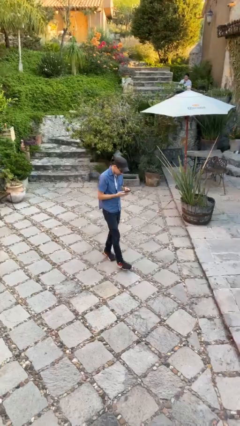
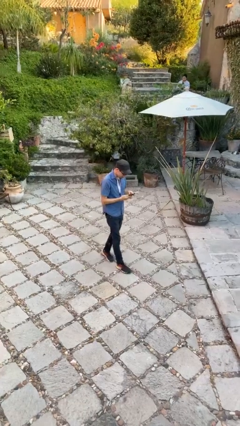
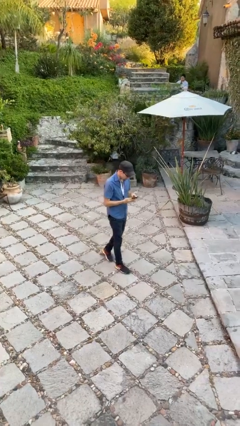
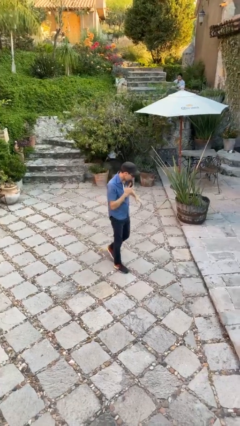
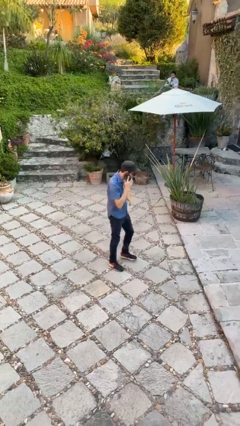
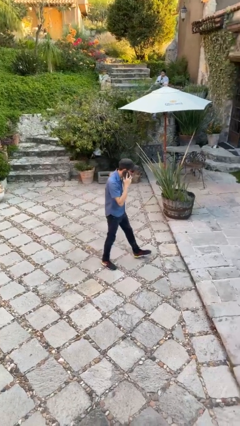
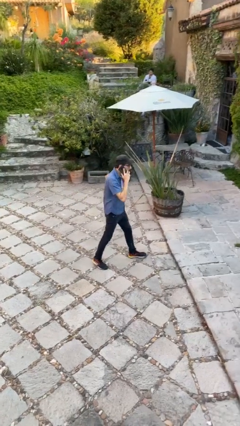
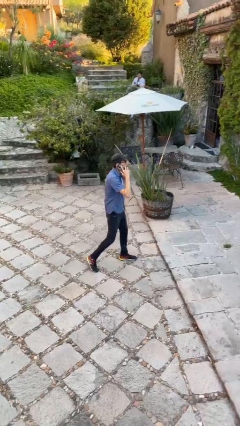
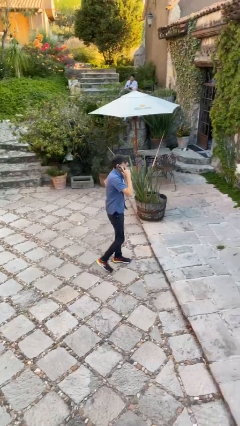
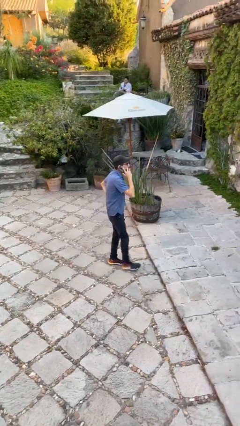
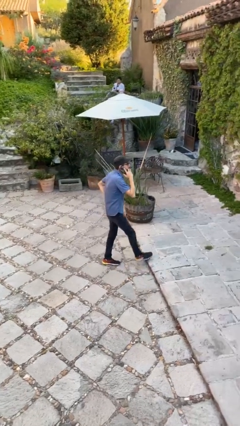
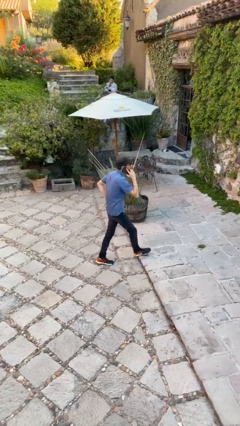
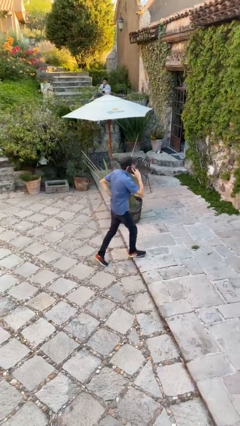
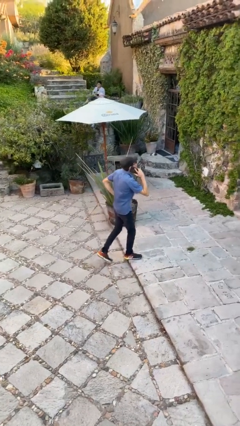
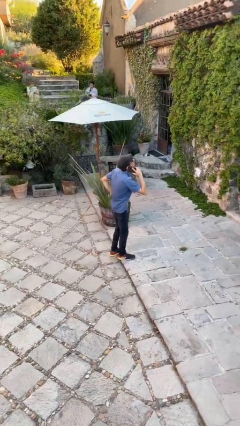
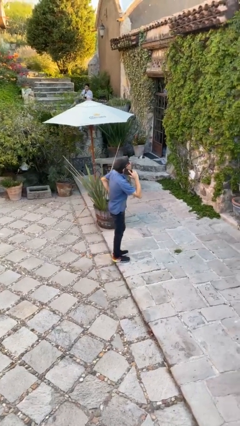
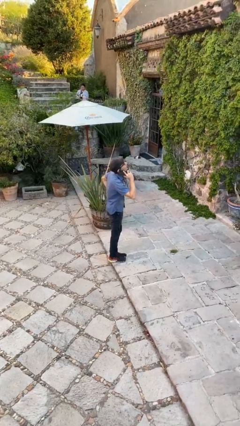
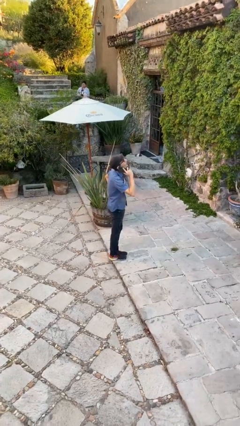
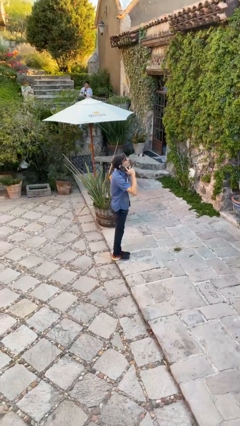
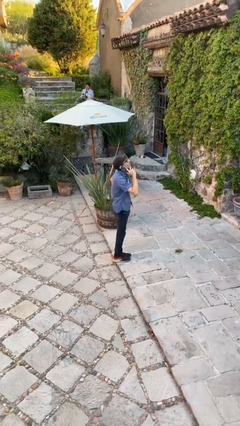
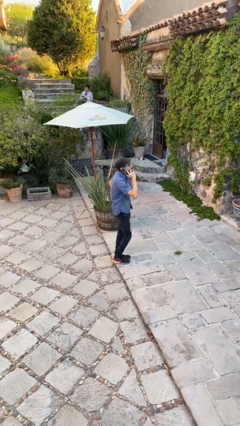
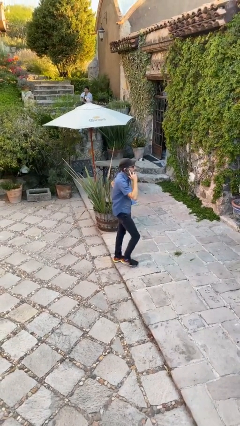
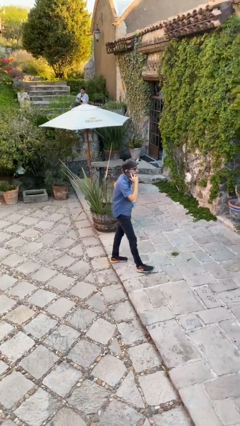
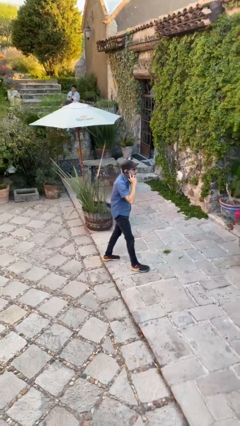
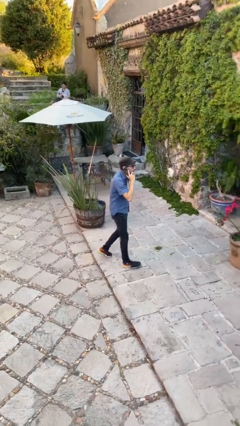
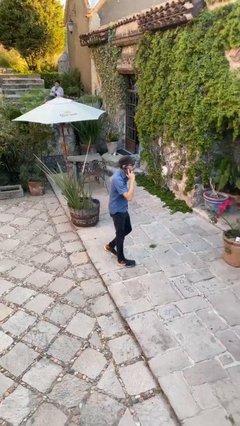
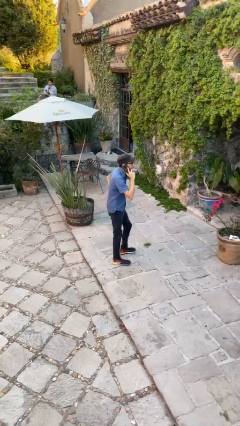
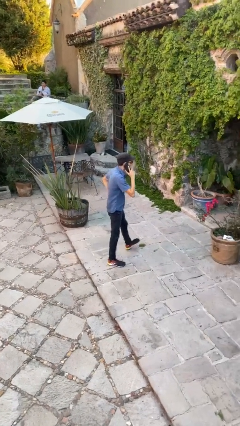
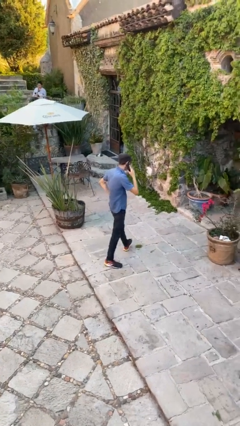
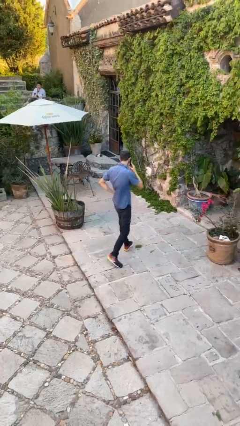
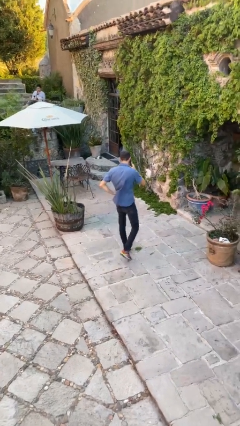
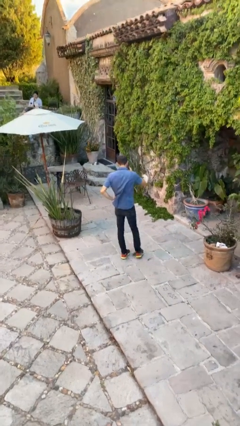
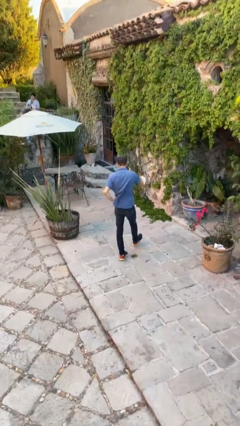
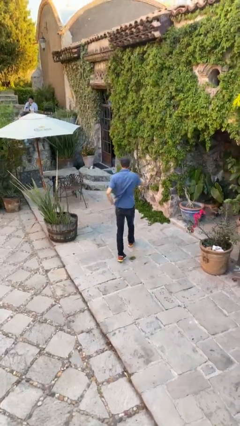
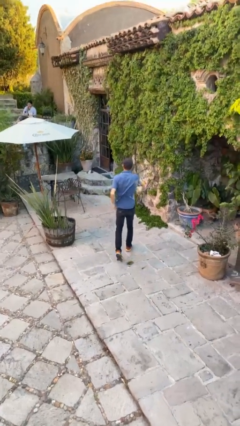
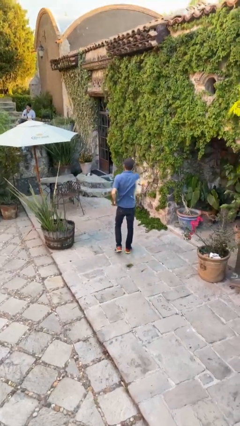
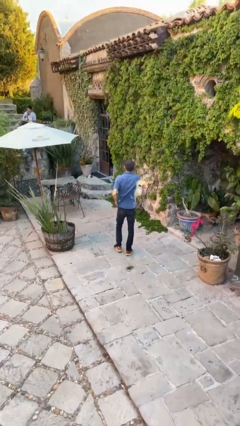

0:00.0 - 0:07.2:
person talks on phone

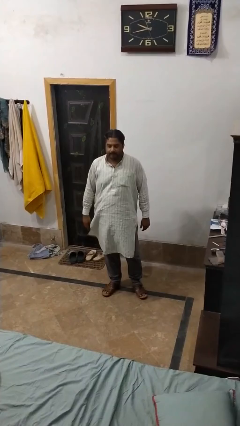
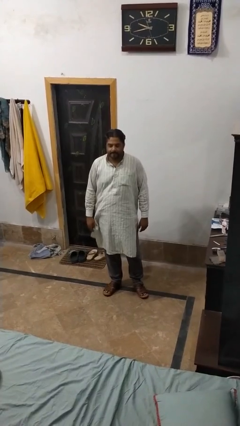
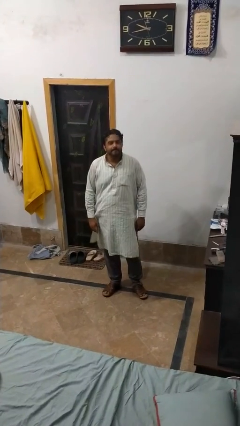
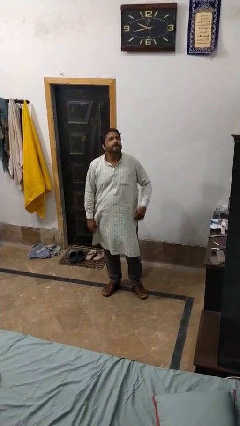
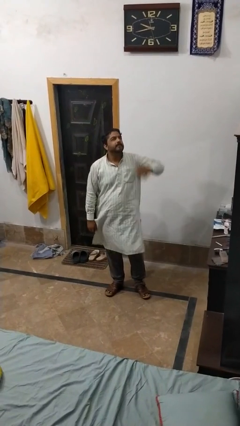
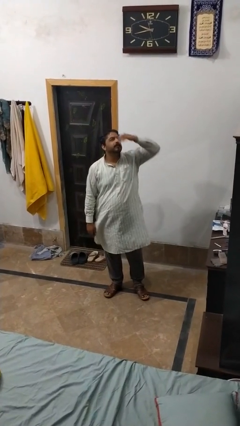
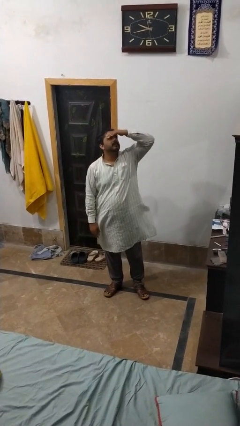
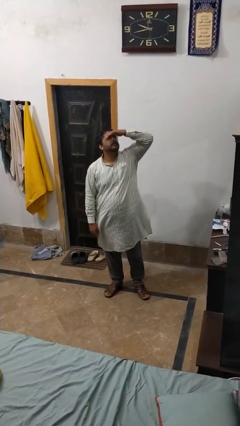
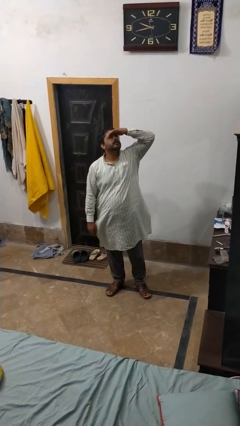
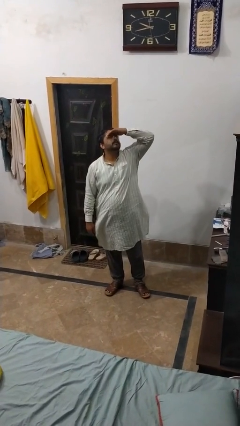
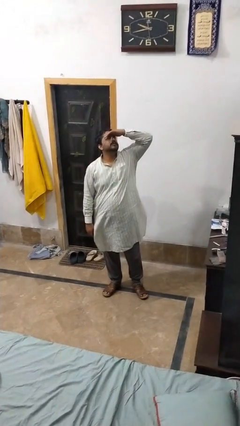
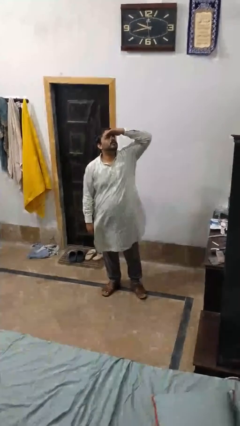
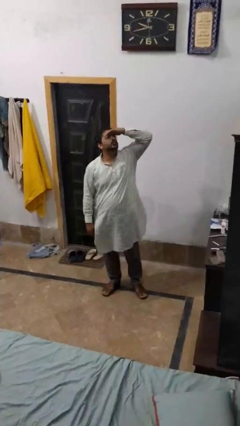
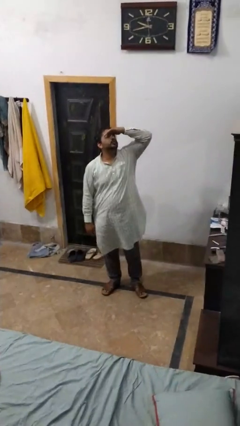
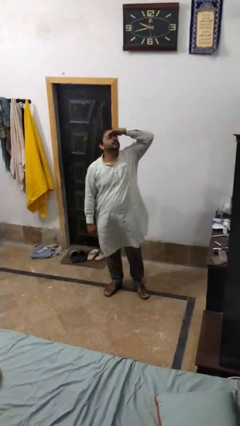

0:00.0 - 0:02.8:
person shades eyes

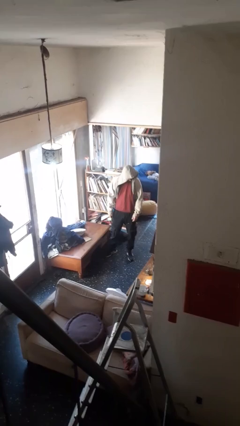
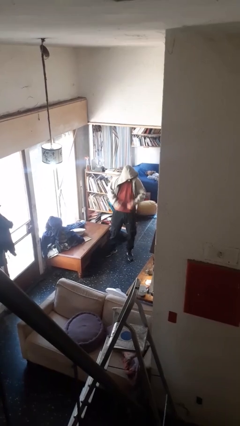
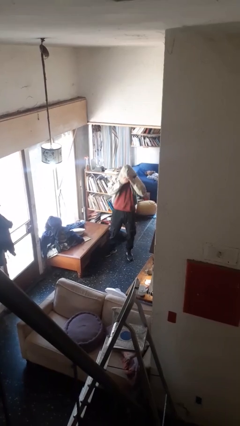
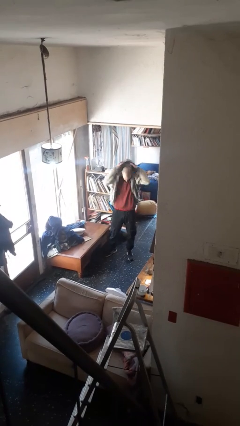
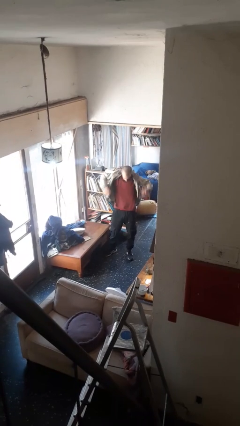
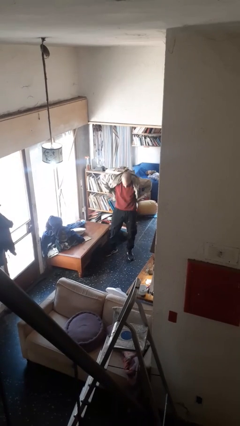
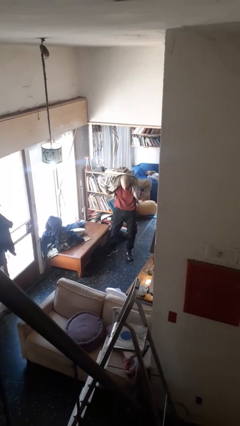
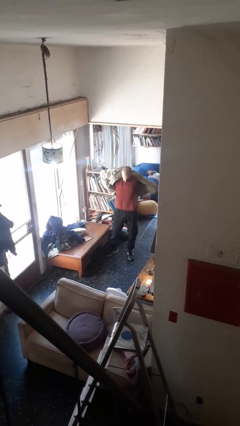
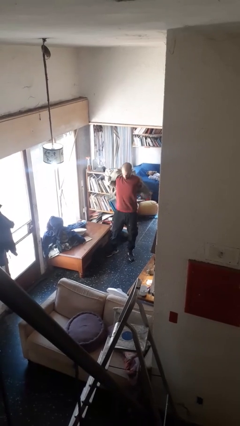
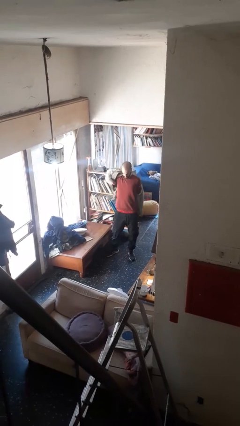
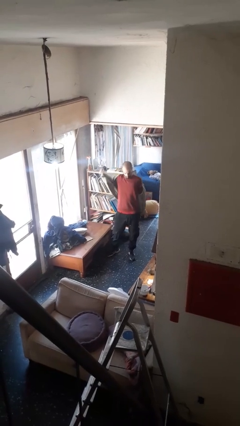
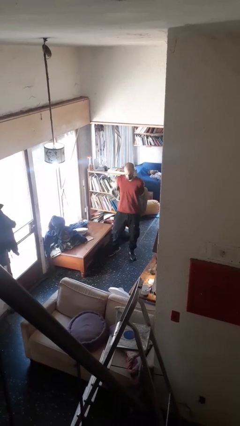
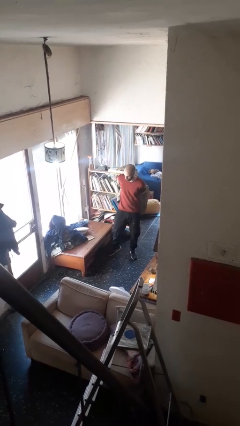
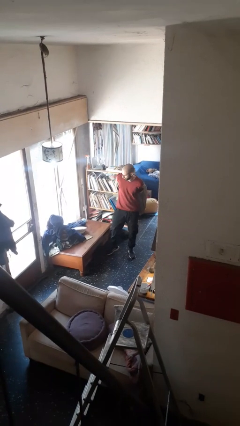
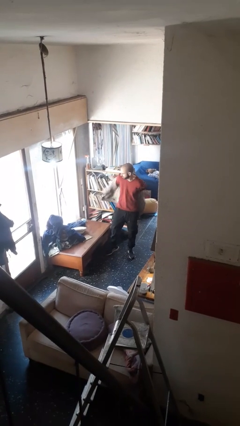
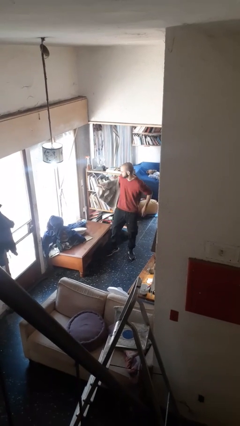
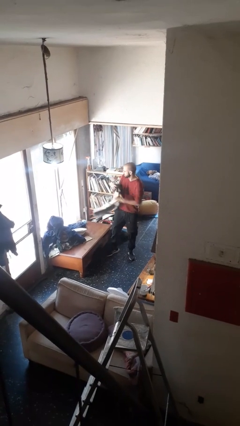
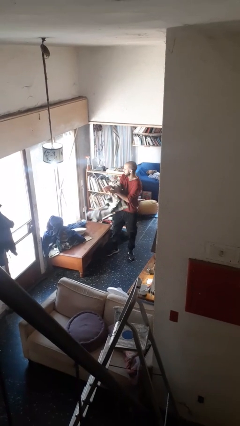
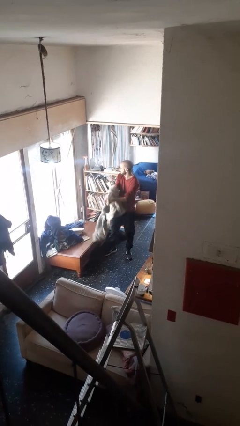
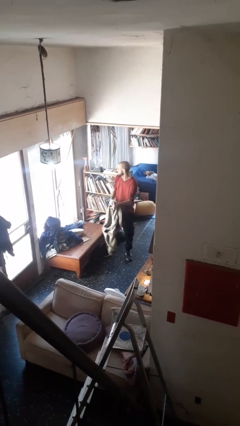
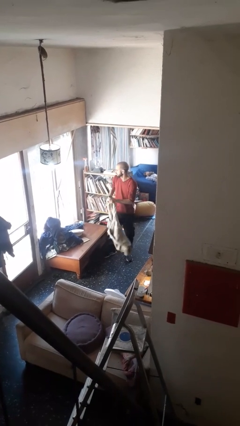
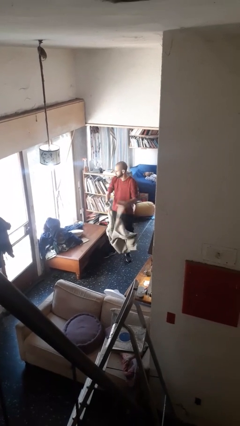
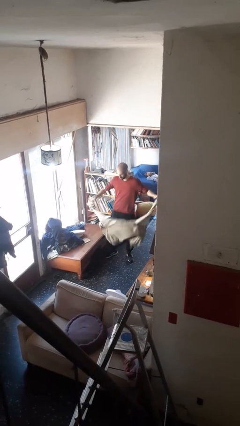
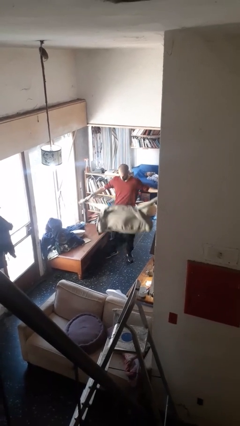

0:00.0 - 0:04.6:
person takes off hoodie

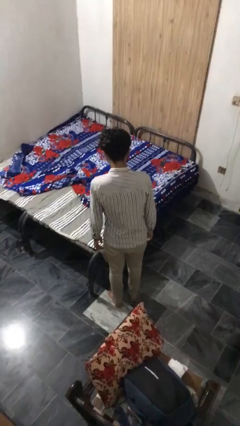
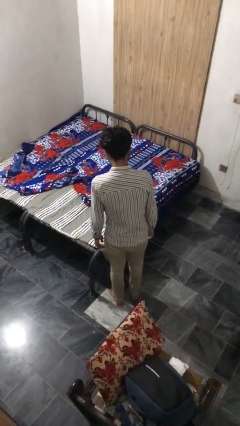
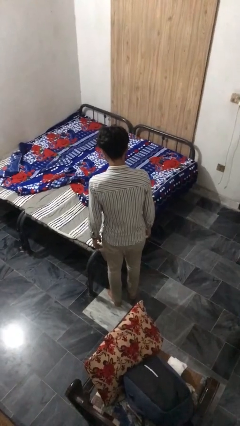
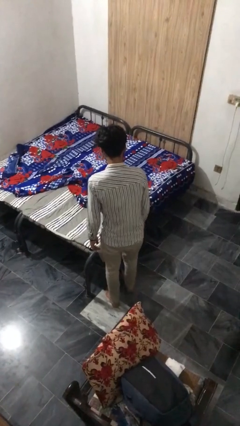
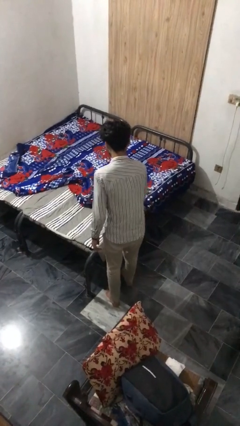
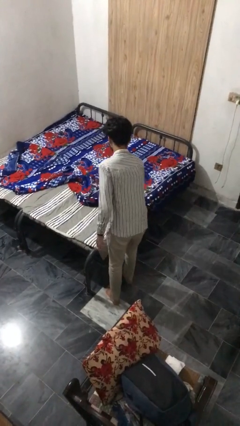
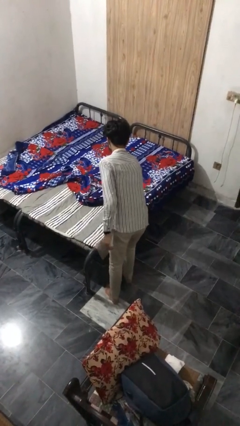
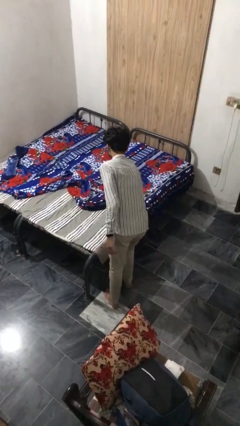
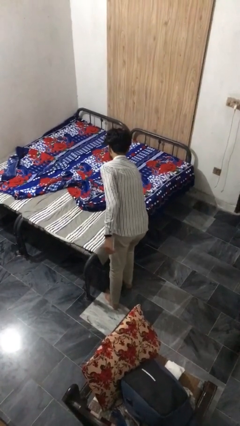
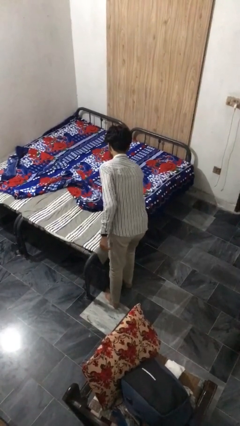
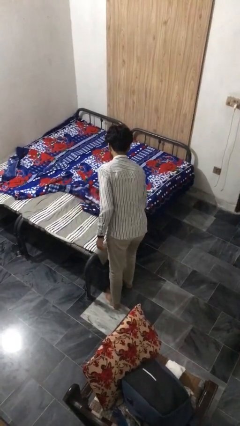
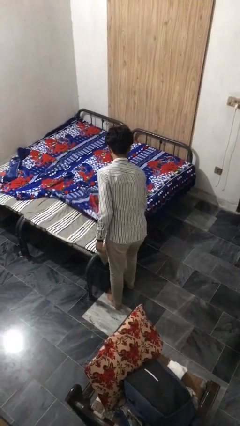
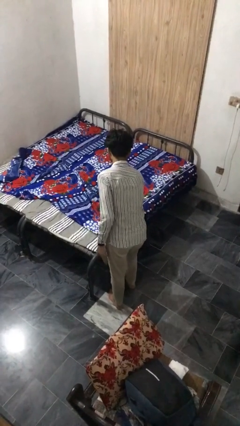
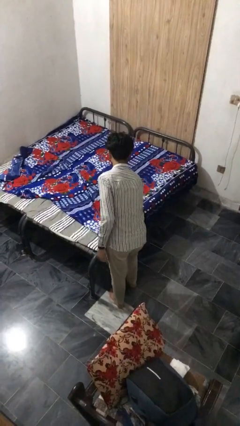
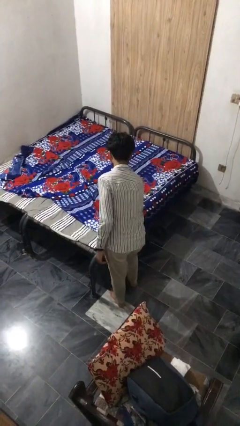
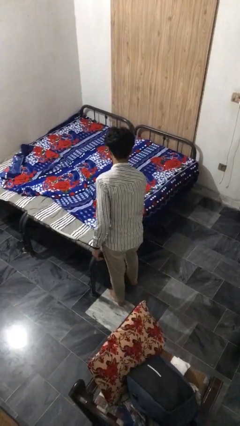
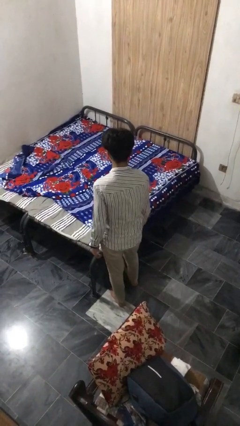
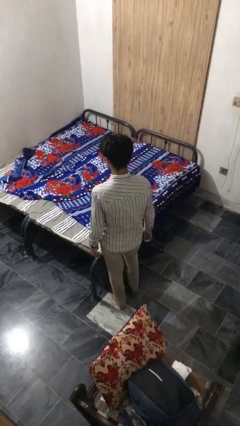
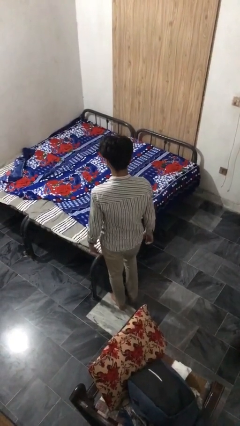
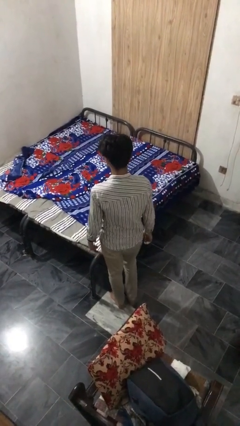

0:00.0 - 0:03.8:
person makes bed
